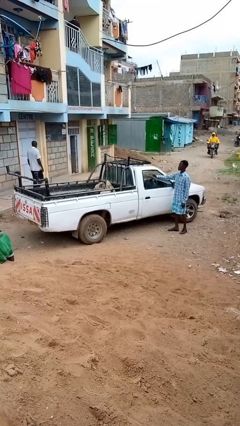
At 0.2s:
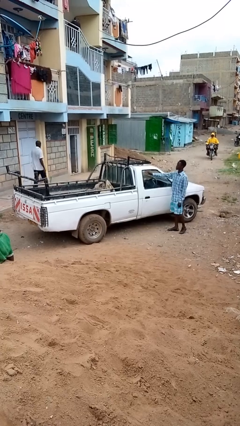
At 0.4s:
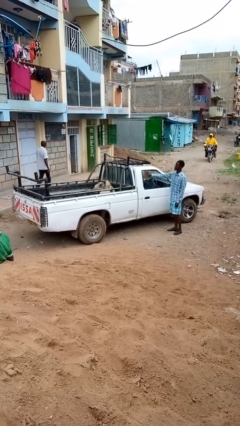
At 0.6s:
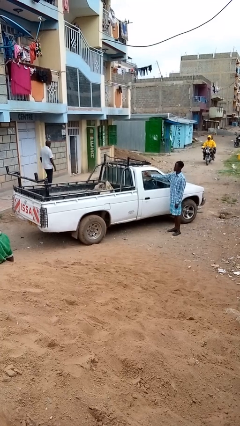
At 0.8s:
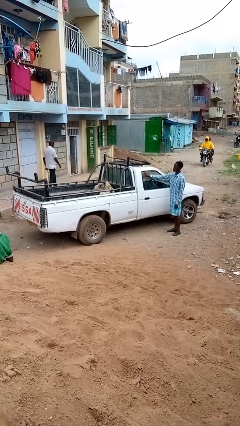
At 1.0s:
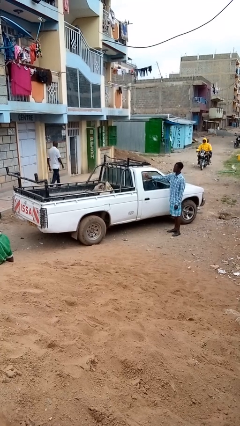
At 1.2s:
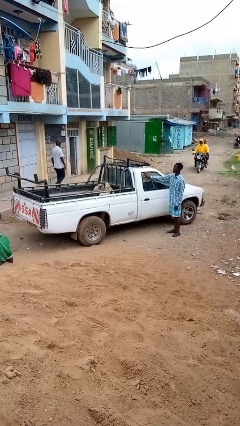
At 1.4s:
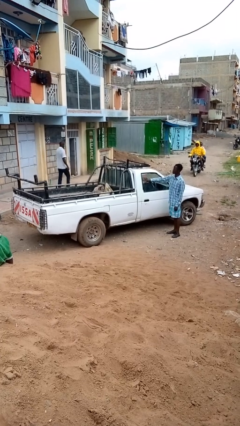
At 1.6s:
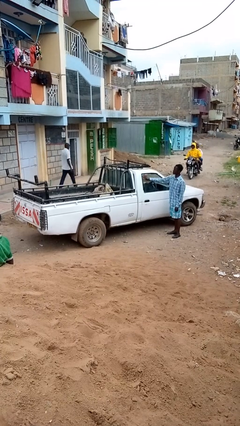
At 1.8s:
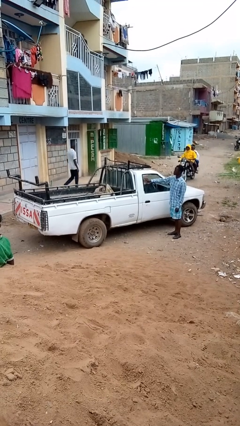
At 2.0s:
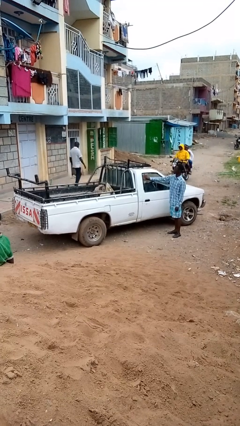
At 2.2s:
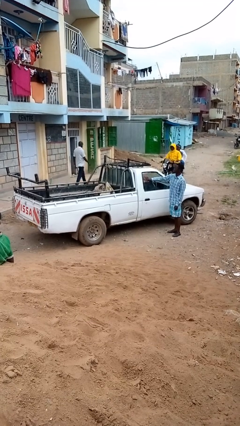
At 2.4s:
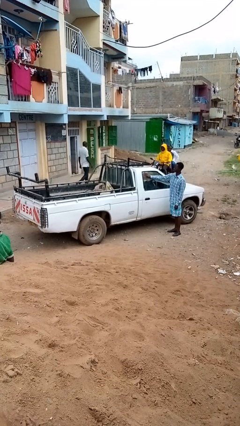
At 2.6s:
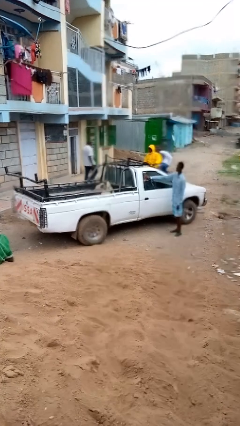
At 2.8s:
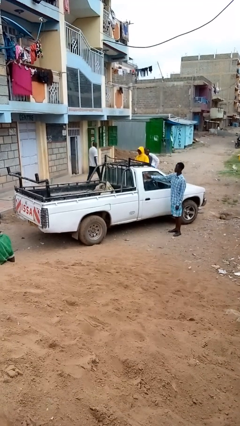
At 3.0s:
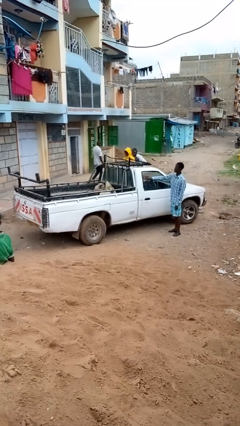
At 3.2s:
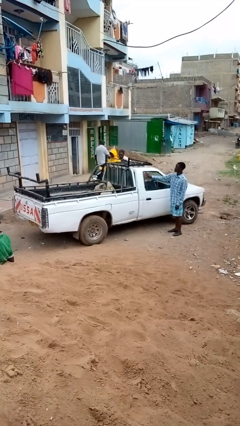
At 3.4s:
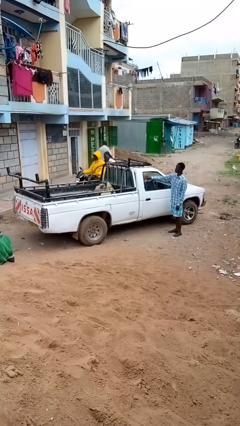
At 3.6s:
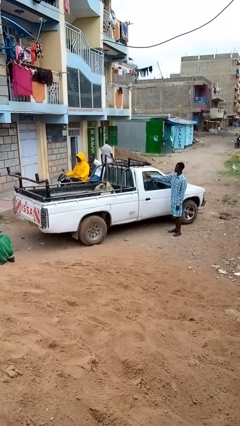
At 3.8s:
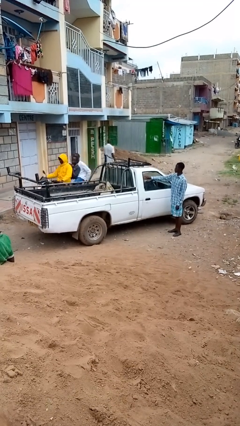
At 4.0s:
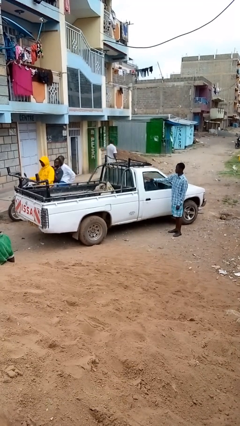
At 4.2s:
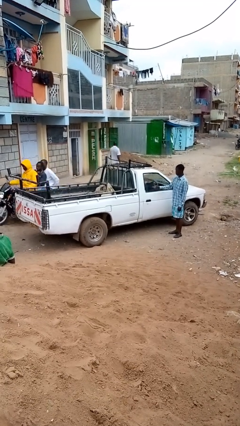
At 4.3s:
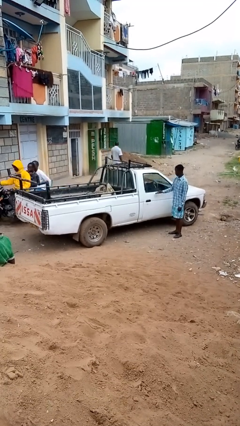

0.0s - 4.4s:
person polishes car with rag

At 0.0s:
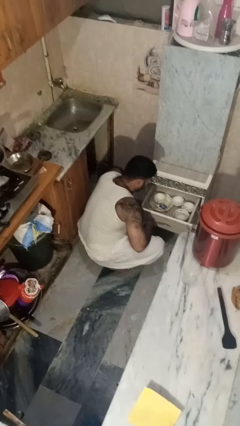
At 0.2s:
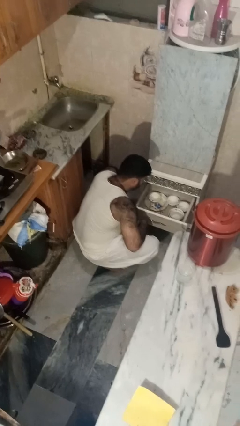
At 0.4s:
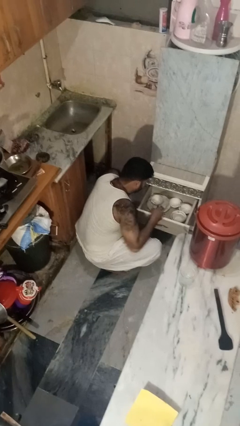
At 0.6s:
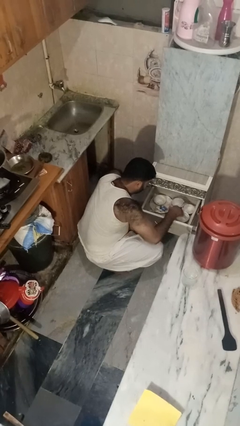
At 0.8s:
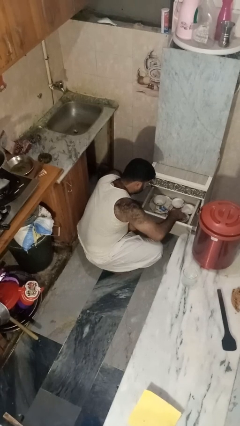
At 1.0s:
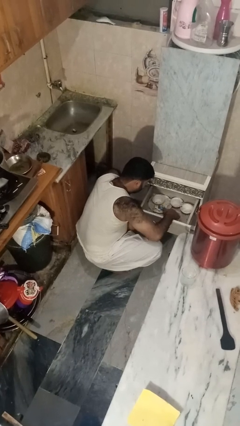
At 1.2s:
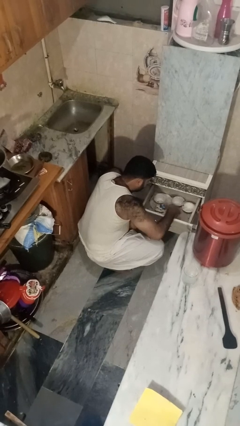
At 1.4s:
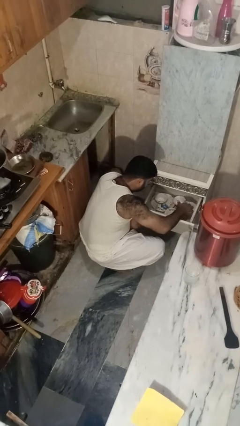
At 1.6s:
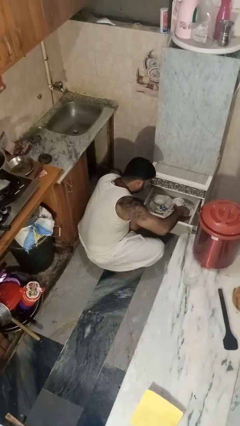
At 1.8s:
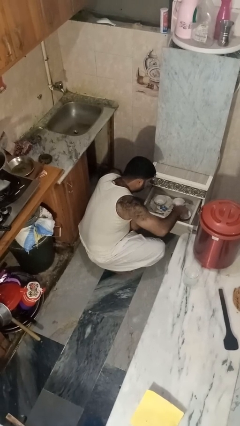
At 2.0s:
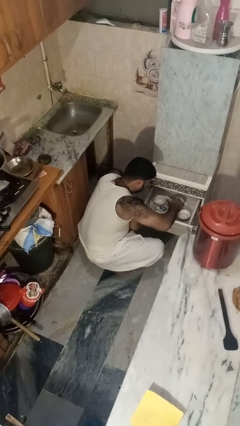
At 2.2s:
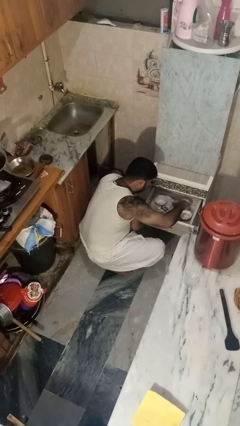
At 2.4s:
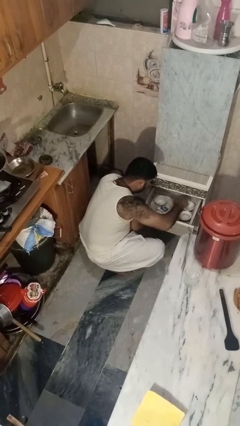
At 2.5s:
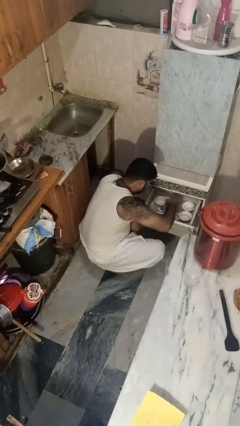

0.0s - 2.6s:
person searches in kitchen drawer

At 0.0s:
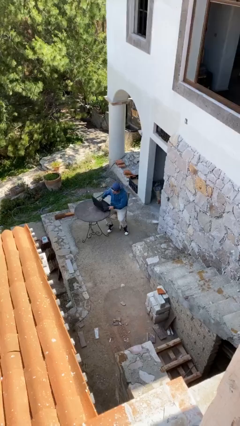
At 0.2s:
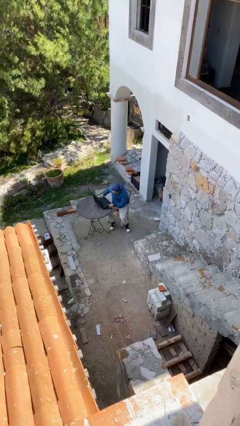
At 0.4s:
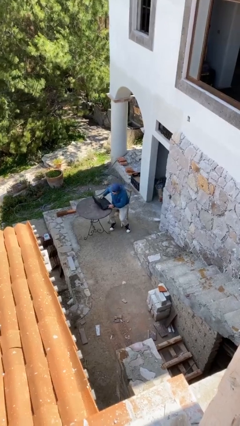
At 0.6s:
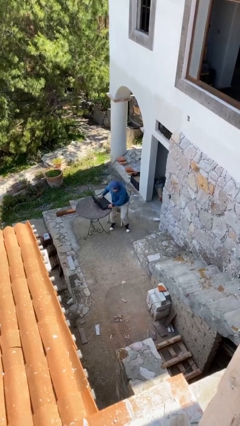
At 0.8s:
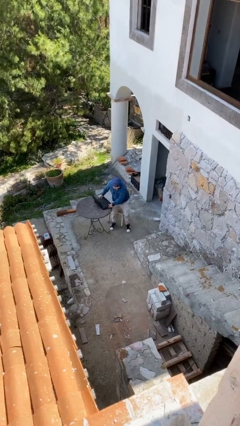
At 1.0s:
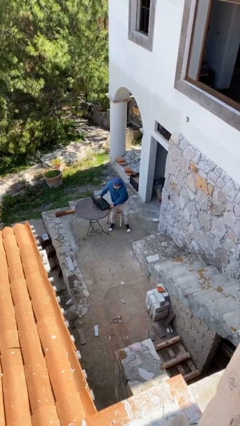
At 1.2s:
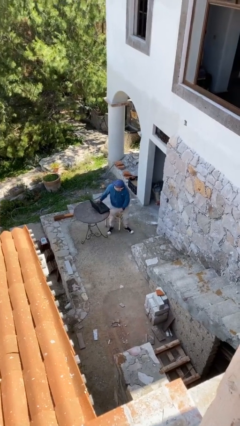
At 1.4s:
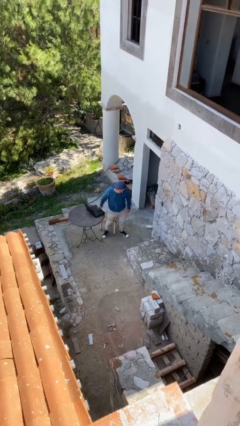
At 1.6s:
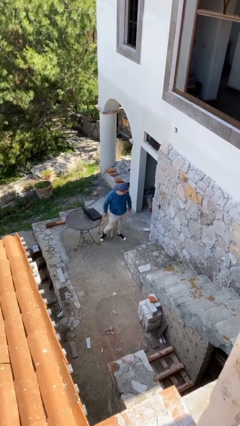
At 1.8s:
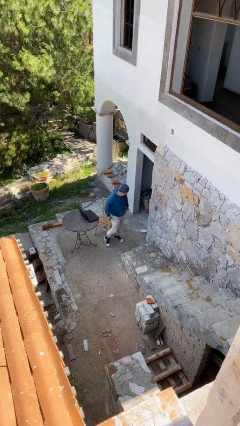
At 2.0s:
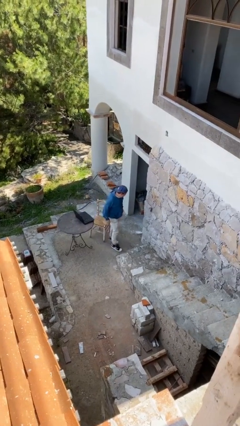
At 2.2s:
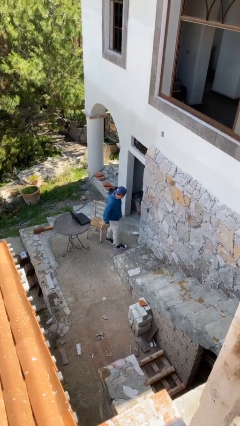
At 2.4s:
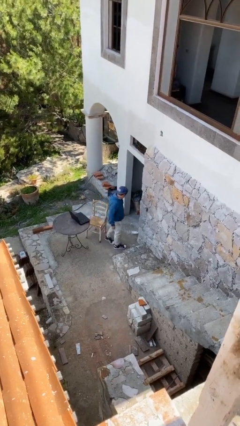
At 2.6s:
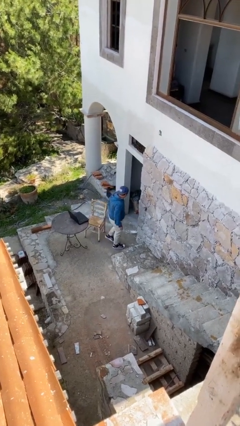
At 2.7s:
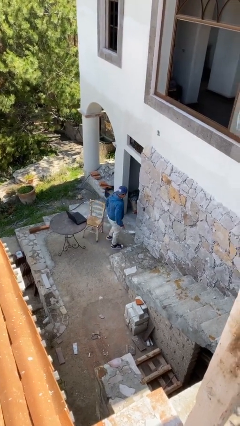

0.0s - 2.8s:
person stands up

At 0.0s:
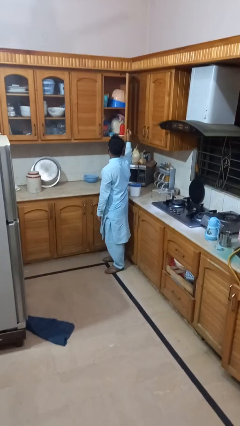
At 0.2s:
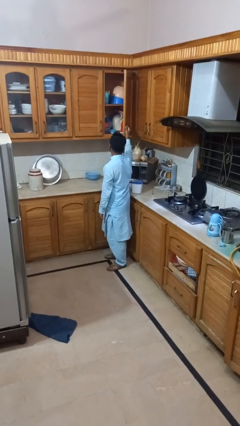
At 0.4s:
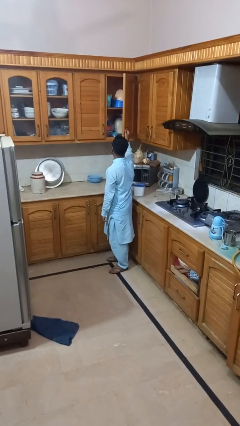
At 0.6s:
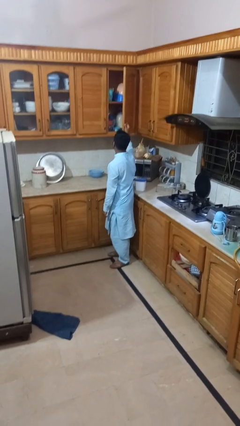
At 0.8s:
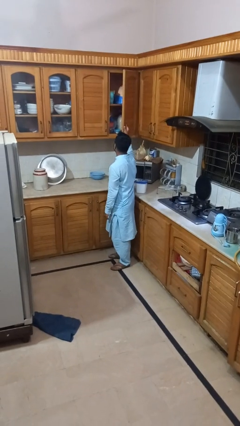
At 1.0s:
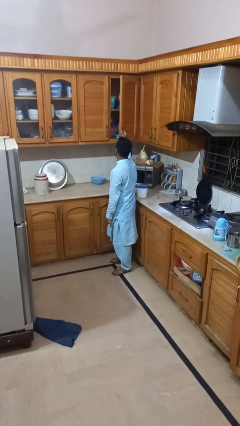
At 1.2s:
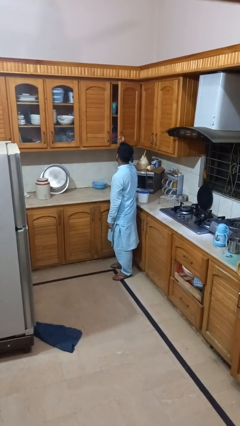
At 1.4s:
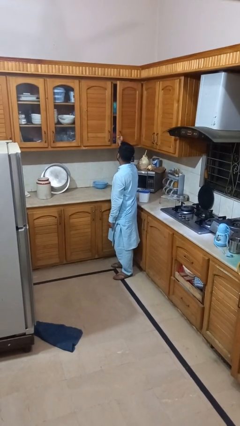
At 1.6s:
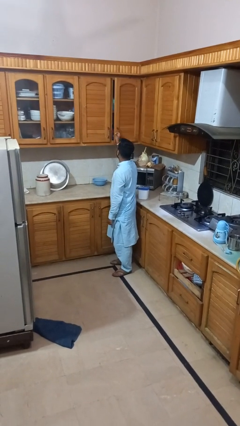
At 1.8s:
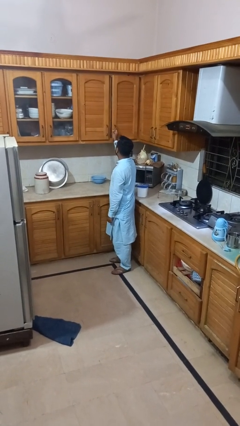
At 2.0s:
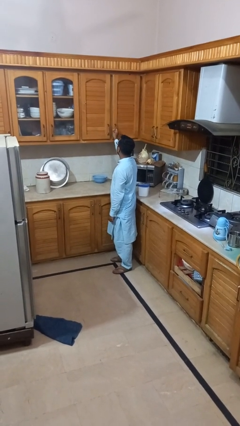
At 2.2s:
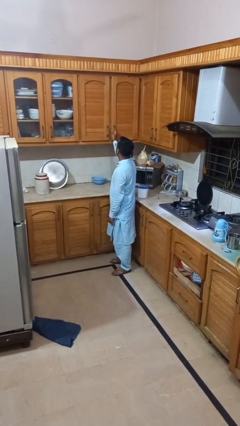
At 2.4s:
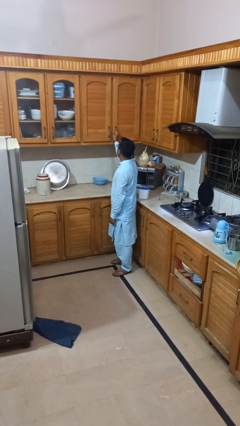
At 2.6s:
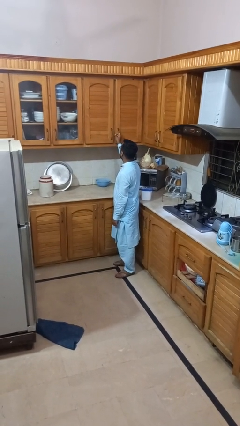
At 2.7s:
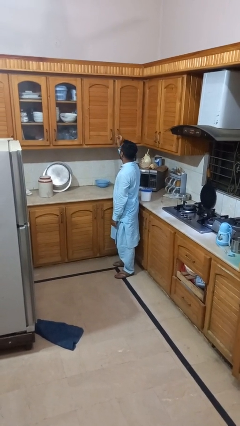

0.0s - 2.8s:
person closes cabinet

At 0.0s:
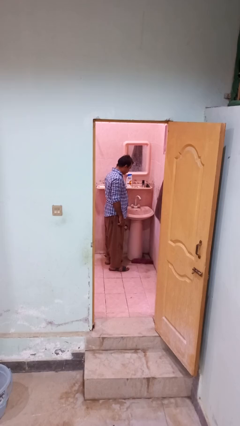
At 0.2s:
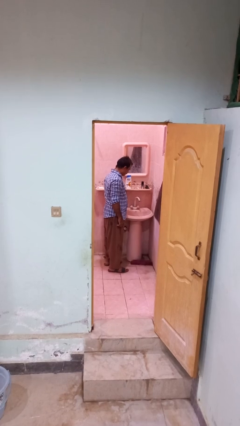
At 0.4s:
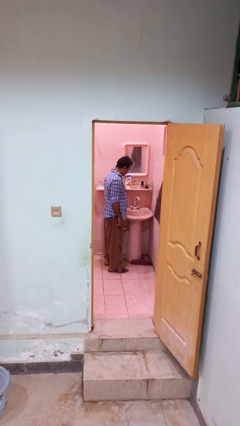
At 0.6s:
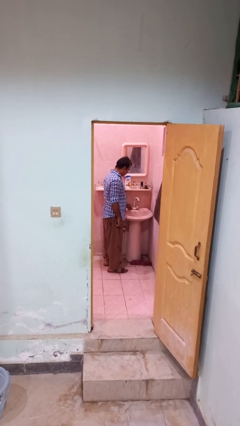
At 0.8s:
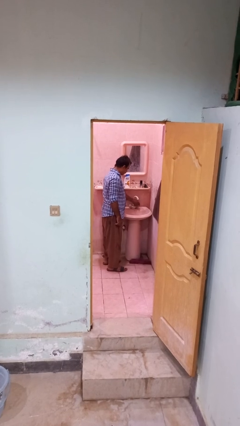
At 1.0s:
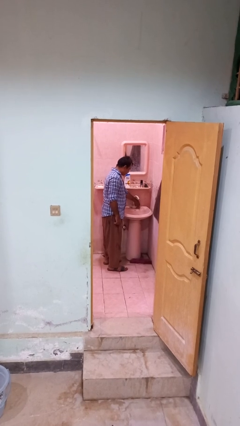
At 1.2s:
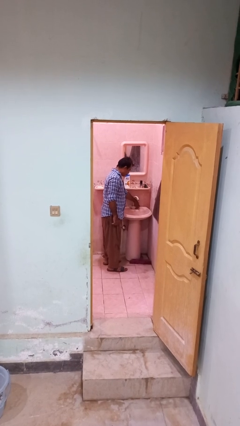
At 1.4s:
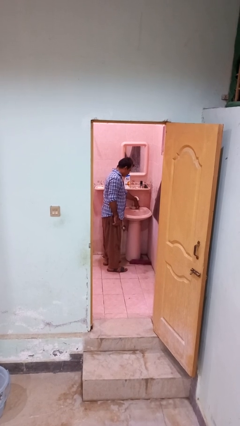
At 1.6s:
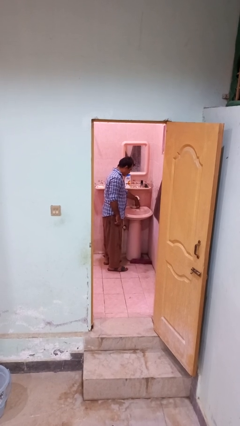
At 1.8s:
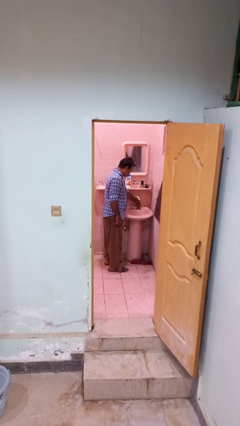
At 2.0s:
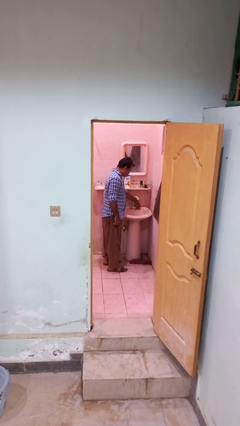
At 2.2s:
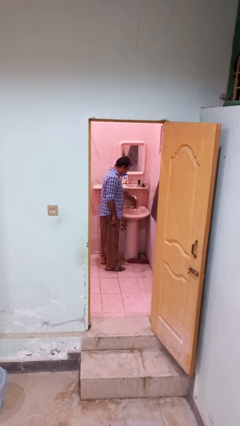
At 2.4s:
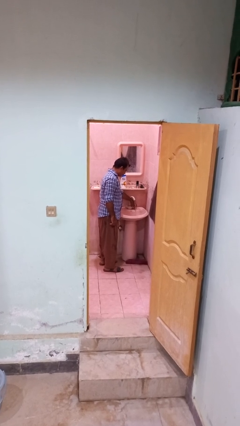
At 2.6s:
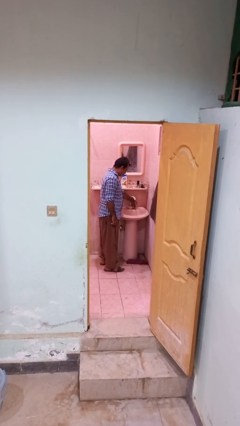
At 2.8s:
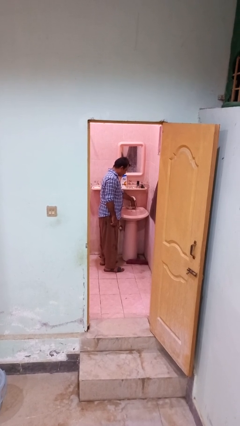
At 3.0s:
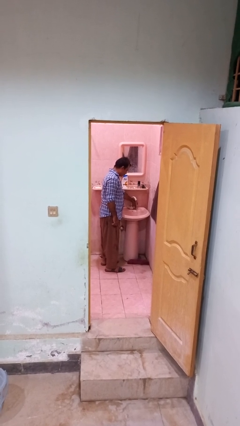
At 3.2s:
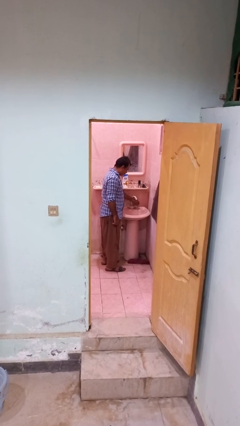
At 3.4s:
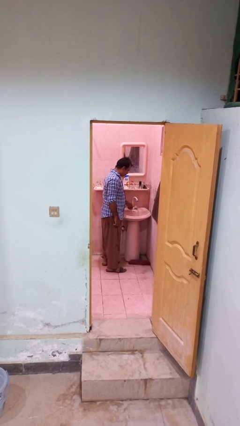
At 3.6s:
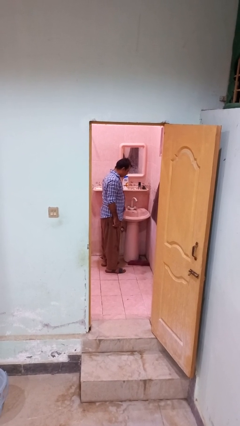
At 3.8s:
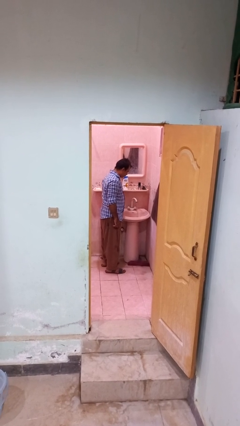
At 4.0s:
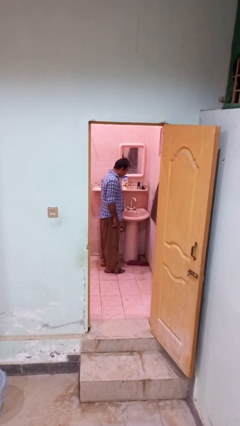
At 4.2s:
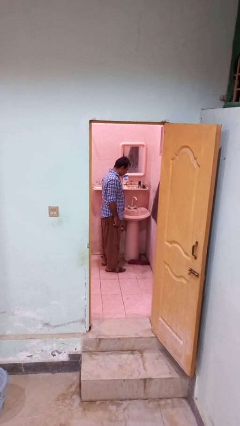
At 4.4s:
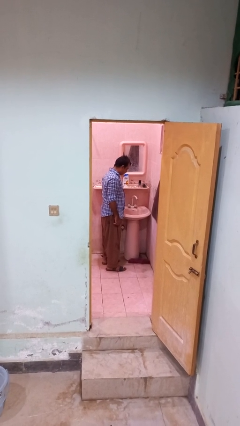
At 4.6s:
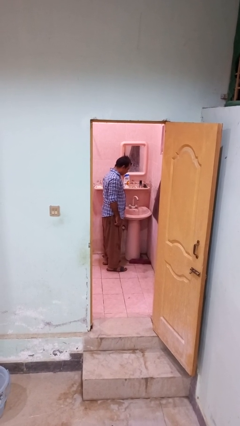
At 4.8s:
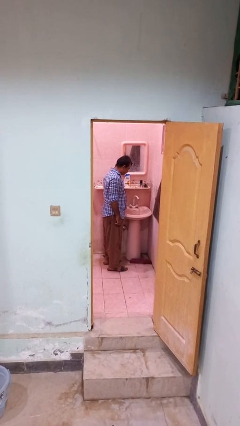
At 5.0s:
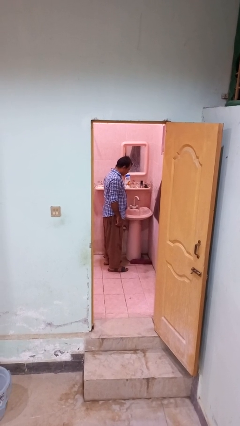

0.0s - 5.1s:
person opens clothes washer

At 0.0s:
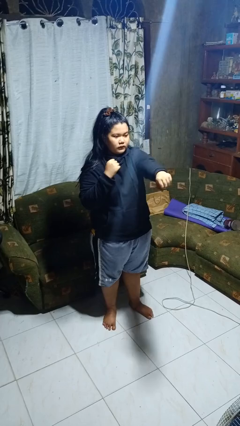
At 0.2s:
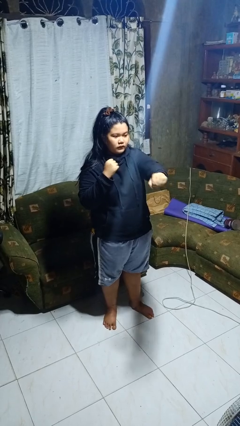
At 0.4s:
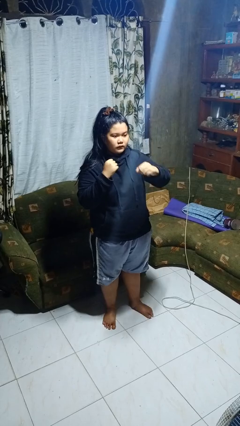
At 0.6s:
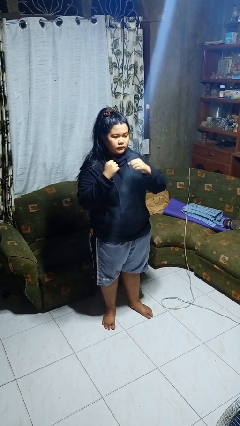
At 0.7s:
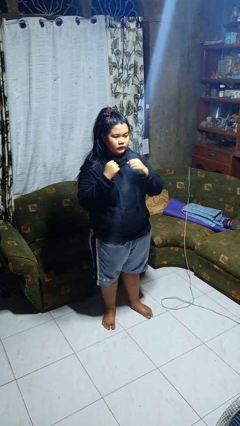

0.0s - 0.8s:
person punches
